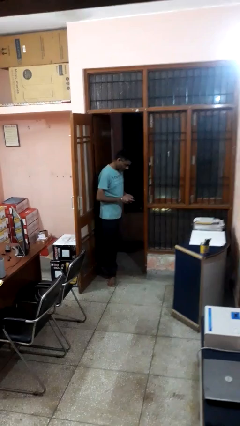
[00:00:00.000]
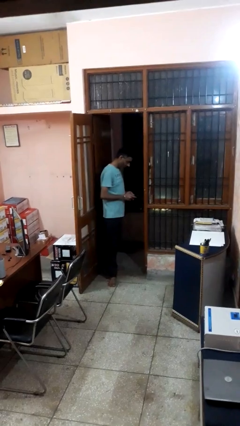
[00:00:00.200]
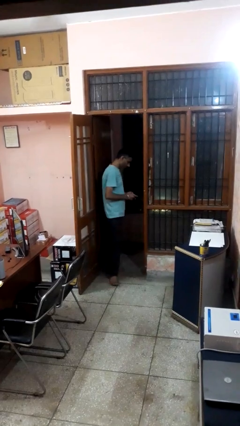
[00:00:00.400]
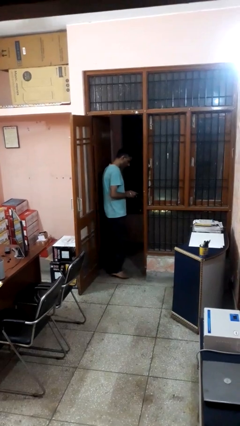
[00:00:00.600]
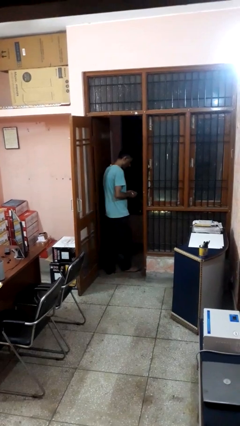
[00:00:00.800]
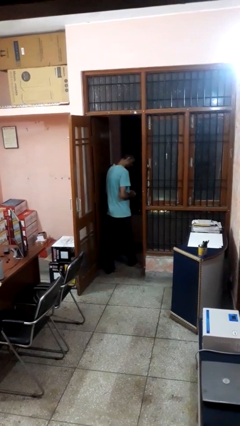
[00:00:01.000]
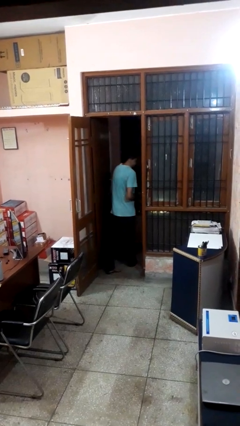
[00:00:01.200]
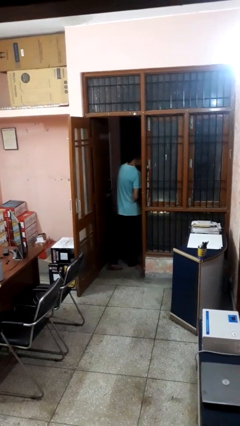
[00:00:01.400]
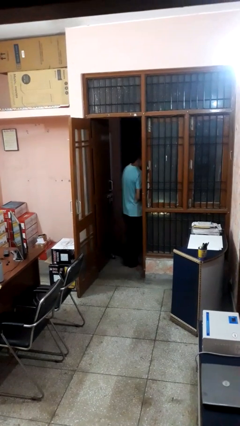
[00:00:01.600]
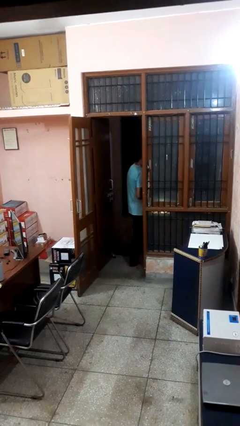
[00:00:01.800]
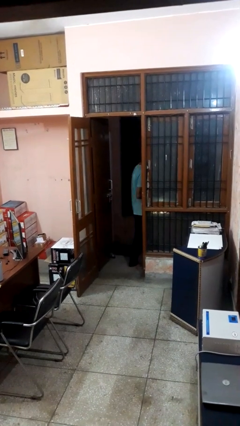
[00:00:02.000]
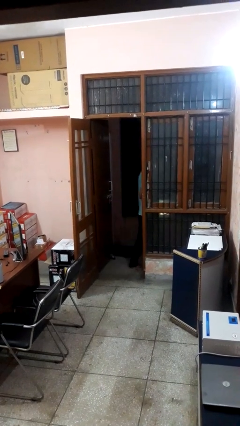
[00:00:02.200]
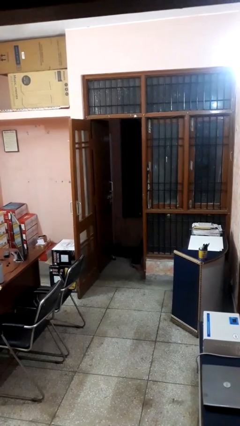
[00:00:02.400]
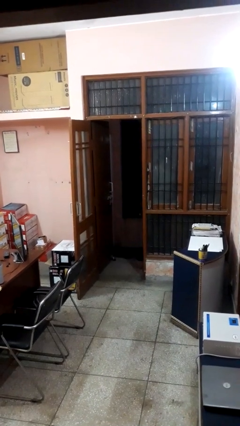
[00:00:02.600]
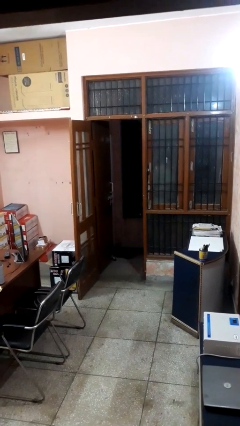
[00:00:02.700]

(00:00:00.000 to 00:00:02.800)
person exits scene through structure

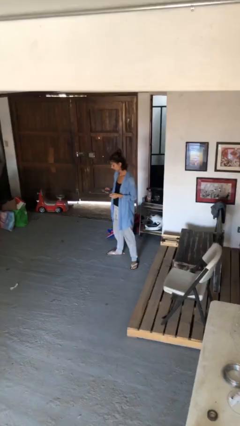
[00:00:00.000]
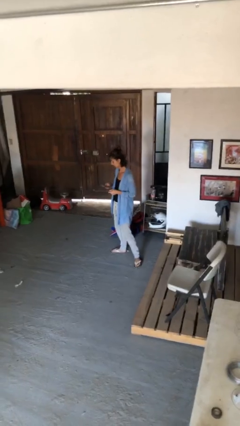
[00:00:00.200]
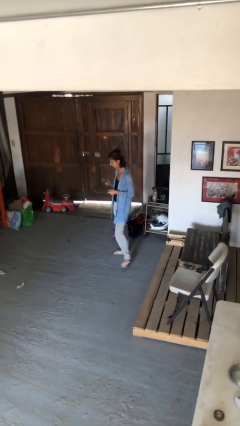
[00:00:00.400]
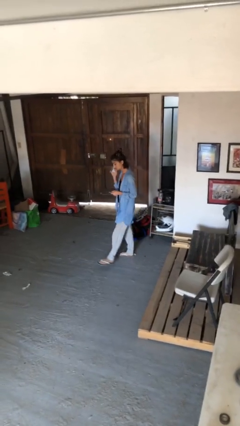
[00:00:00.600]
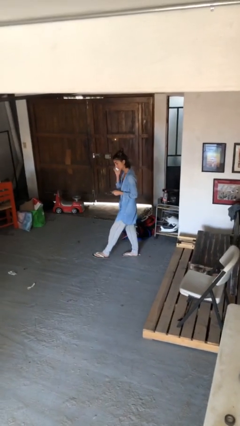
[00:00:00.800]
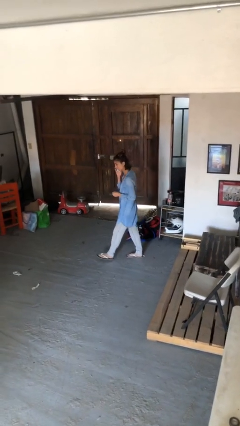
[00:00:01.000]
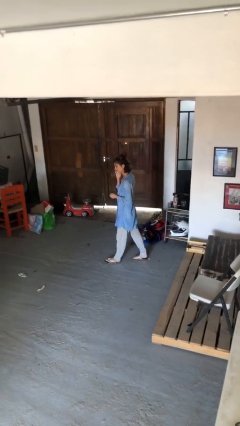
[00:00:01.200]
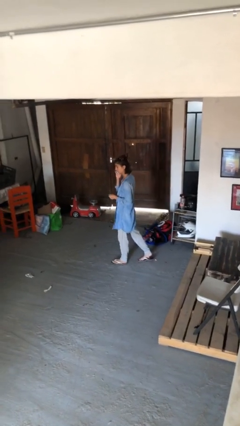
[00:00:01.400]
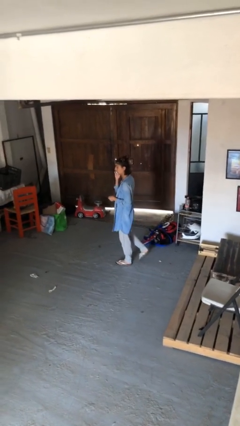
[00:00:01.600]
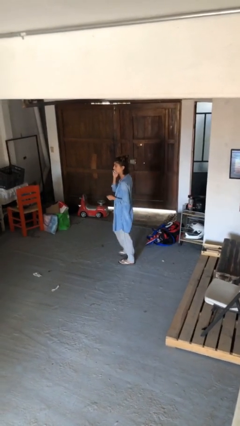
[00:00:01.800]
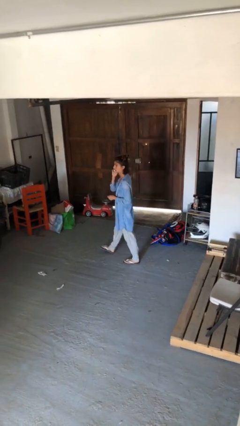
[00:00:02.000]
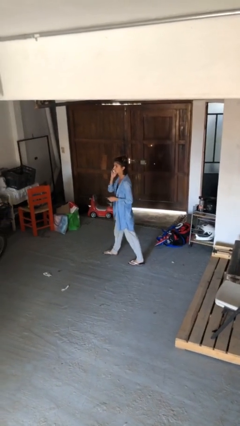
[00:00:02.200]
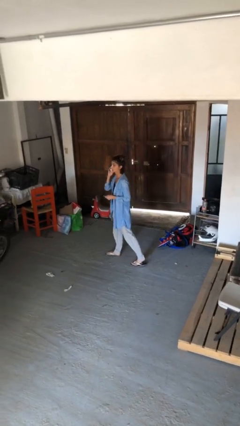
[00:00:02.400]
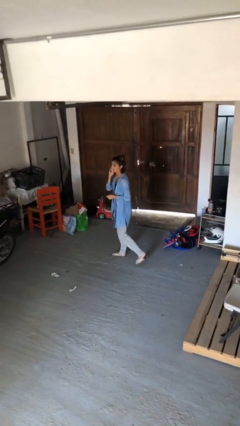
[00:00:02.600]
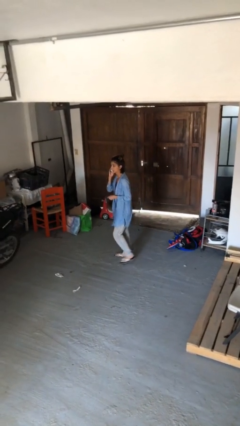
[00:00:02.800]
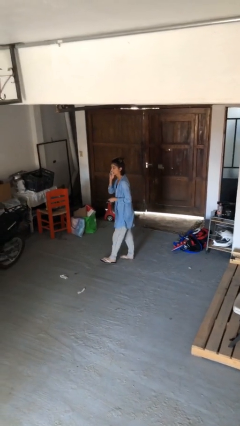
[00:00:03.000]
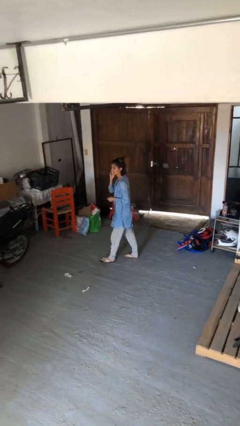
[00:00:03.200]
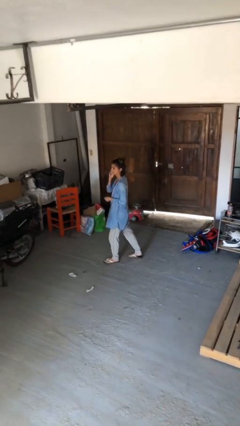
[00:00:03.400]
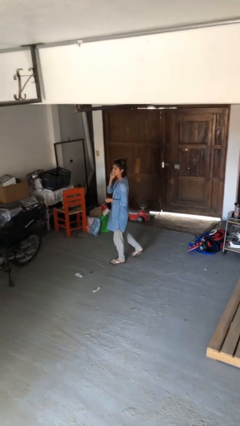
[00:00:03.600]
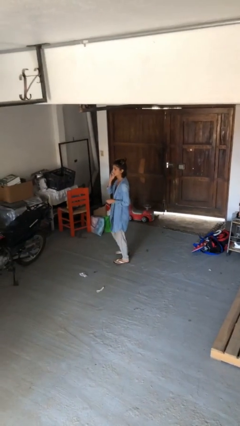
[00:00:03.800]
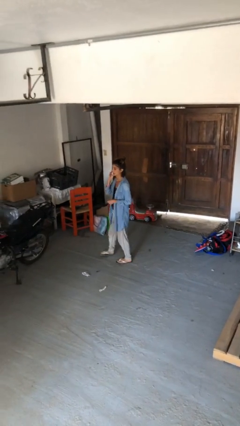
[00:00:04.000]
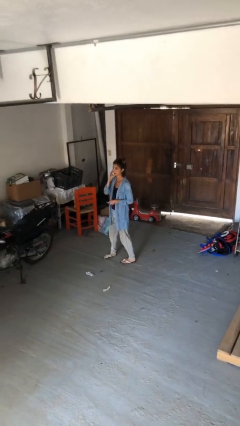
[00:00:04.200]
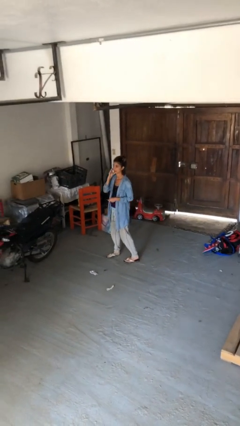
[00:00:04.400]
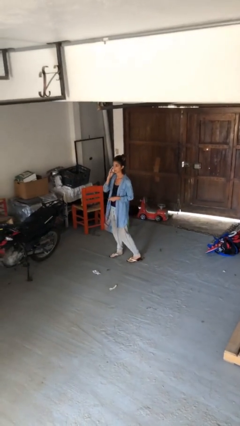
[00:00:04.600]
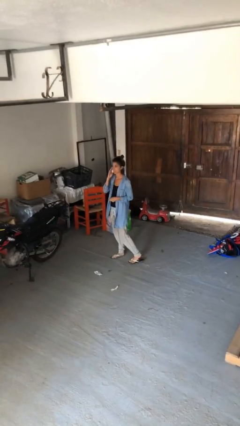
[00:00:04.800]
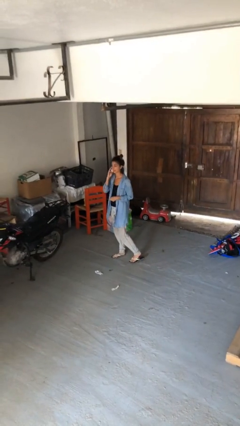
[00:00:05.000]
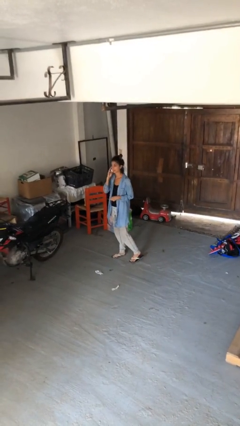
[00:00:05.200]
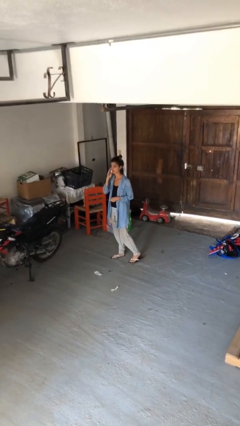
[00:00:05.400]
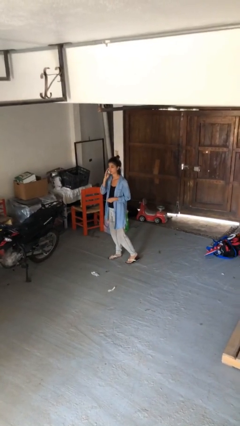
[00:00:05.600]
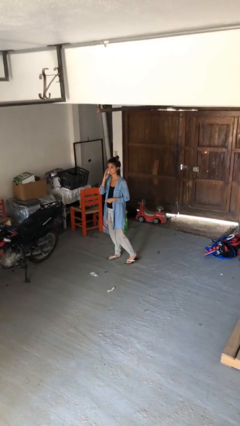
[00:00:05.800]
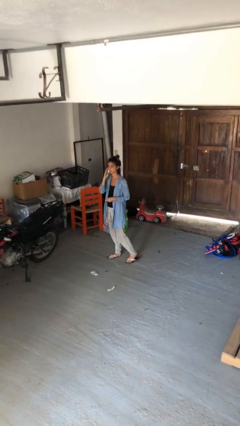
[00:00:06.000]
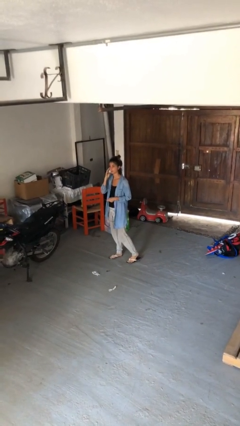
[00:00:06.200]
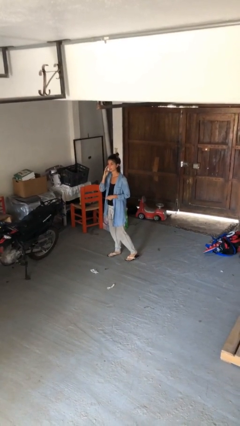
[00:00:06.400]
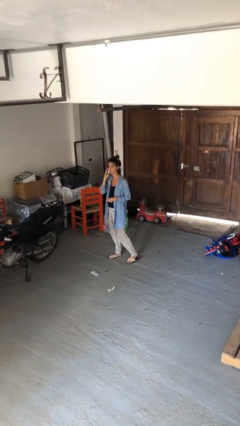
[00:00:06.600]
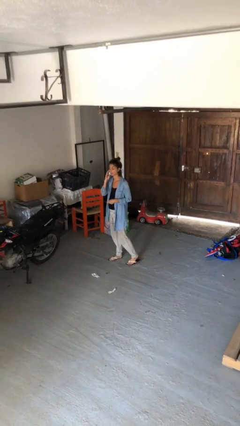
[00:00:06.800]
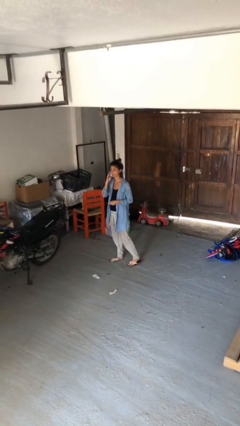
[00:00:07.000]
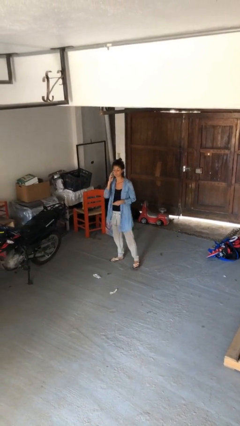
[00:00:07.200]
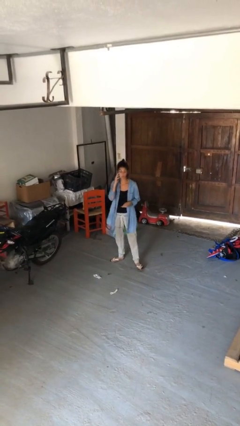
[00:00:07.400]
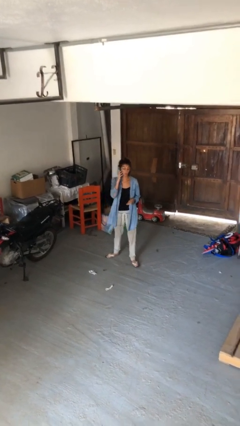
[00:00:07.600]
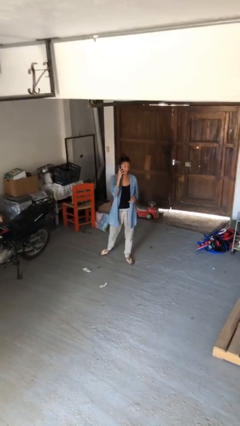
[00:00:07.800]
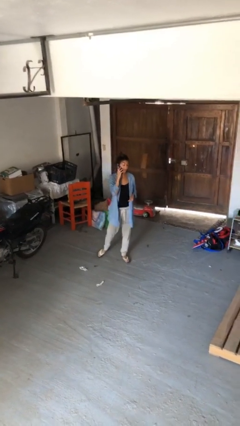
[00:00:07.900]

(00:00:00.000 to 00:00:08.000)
person talks on phone

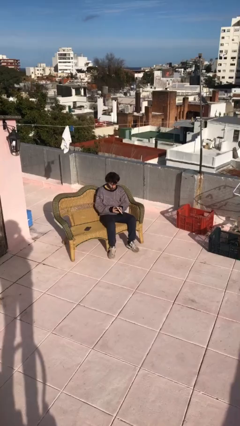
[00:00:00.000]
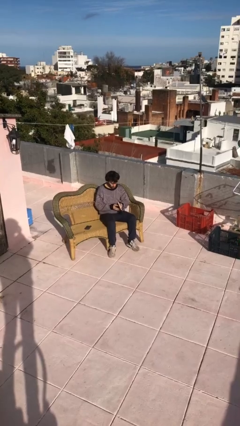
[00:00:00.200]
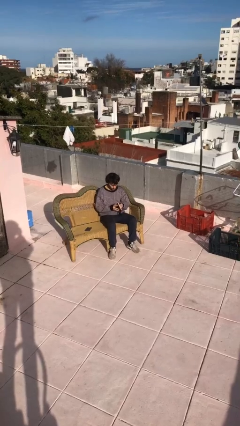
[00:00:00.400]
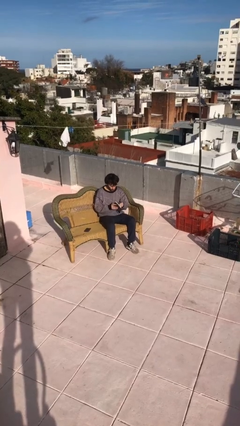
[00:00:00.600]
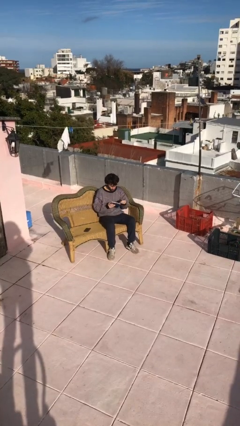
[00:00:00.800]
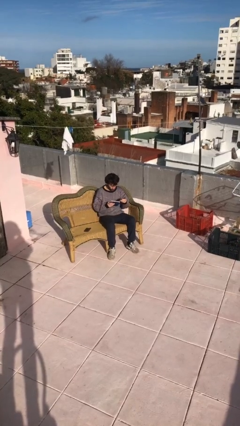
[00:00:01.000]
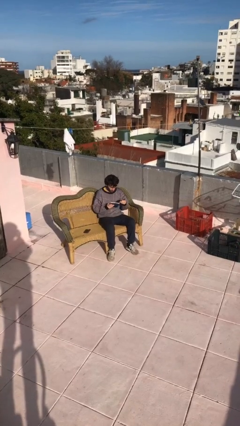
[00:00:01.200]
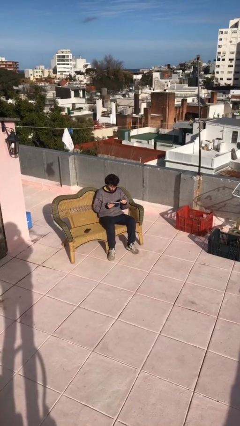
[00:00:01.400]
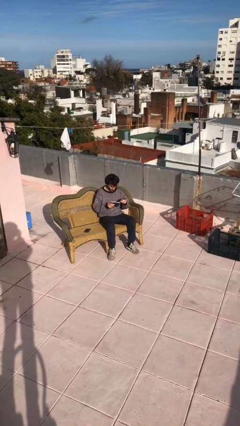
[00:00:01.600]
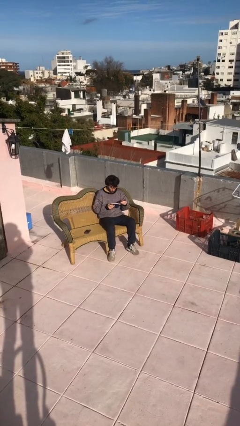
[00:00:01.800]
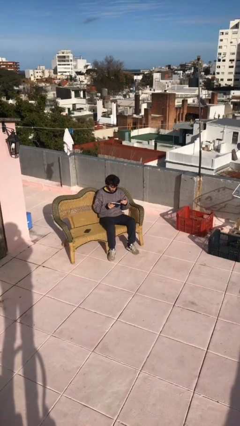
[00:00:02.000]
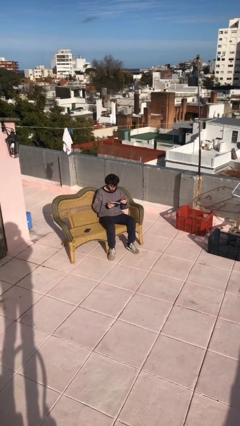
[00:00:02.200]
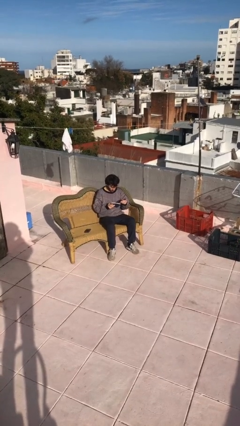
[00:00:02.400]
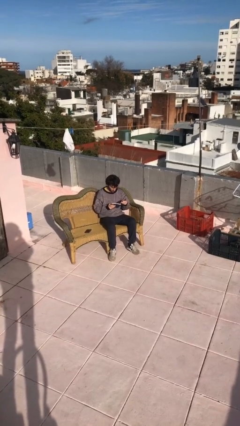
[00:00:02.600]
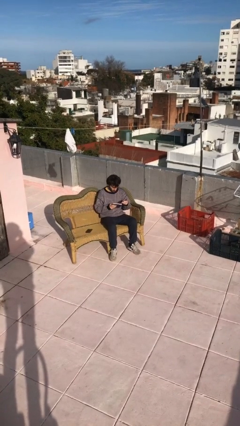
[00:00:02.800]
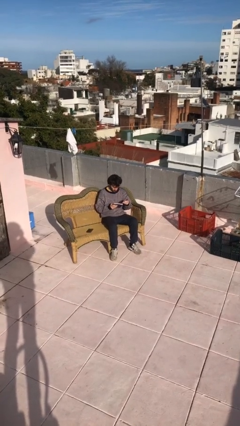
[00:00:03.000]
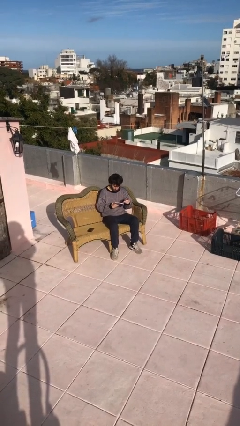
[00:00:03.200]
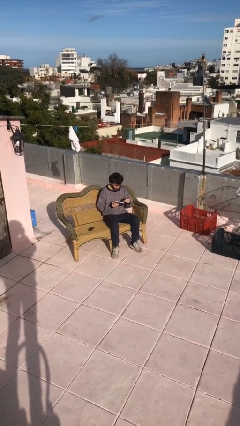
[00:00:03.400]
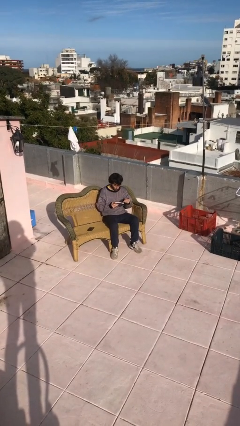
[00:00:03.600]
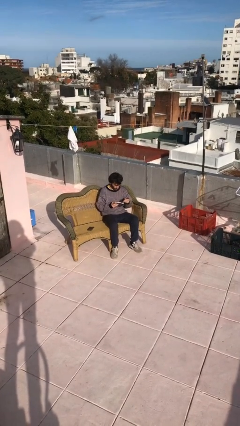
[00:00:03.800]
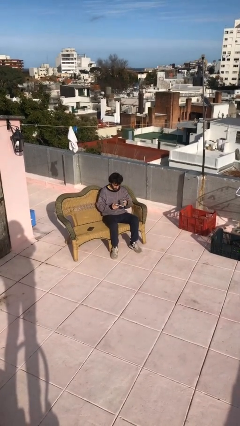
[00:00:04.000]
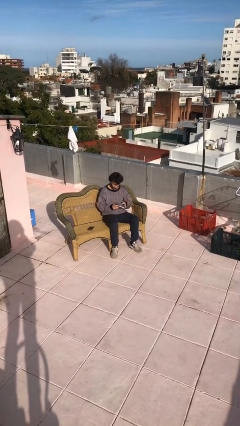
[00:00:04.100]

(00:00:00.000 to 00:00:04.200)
person reads book

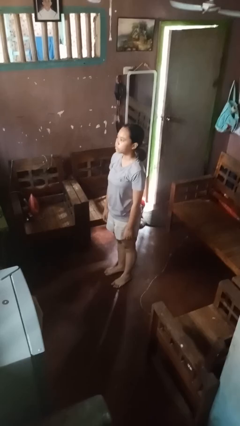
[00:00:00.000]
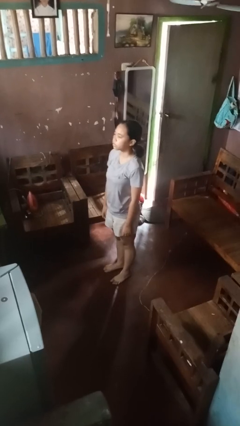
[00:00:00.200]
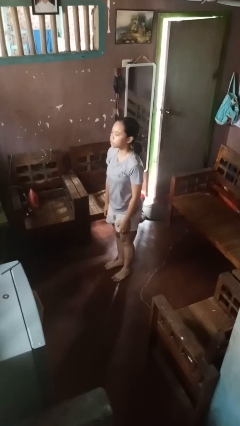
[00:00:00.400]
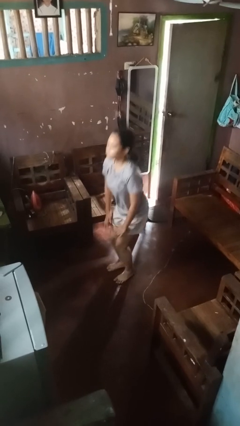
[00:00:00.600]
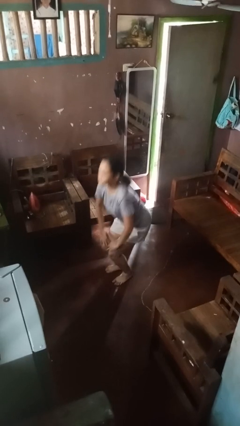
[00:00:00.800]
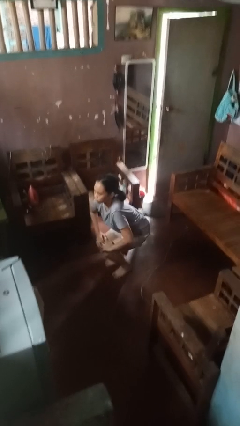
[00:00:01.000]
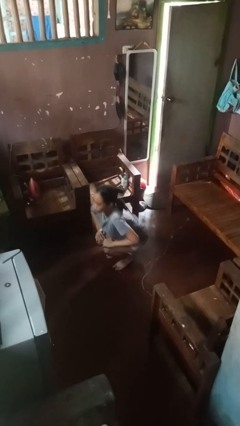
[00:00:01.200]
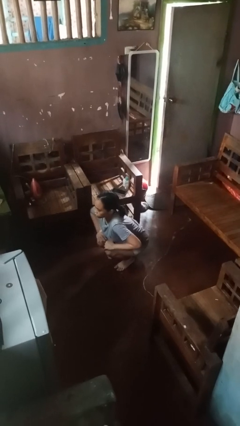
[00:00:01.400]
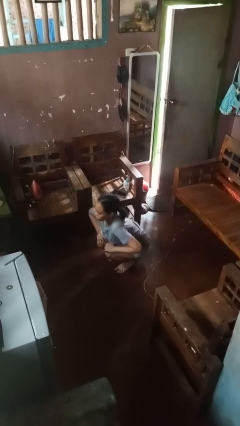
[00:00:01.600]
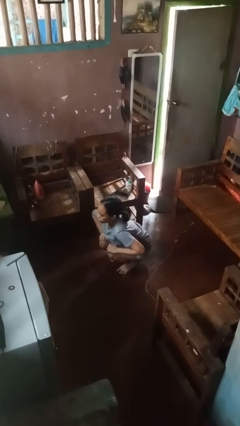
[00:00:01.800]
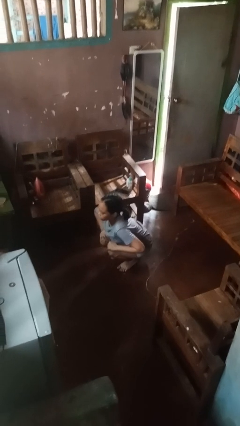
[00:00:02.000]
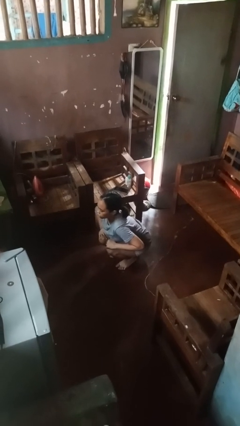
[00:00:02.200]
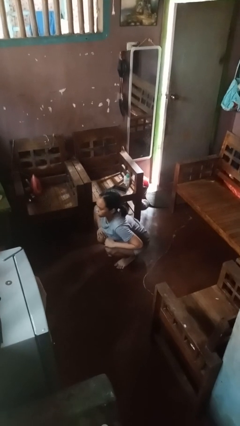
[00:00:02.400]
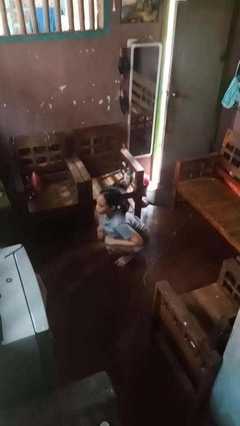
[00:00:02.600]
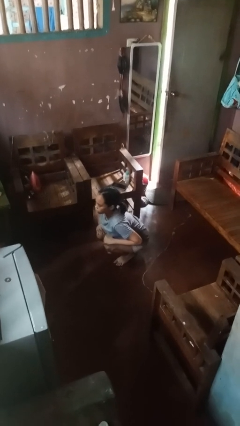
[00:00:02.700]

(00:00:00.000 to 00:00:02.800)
person squats
